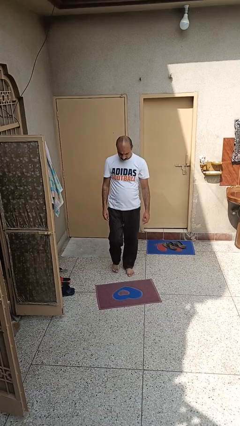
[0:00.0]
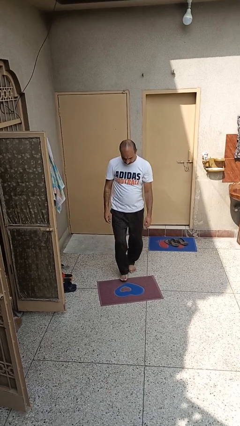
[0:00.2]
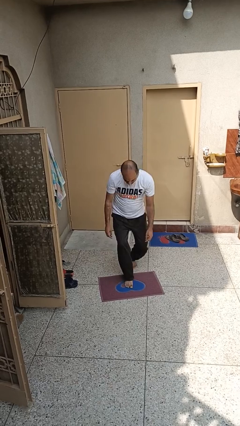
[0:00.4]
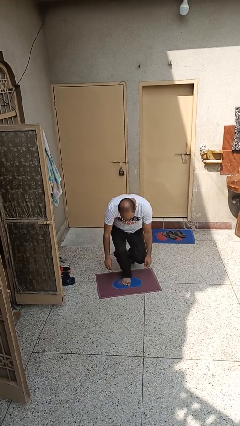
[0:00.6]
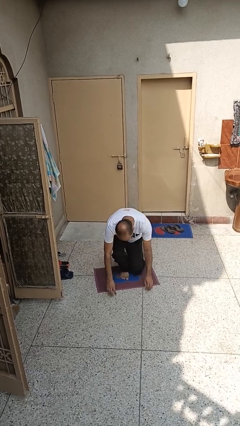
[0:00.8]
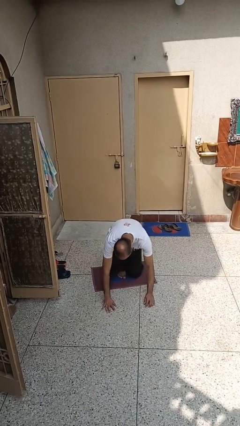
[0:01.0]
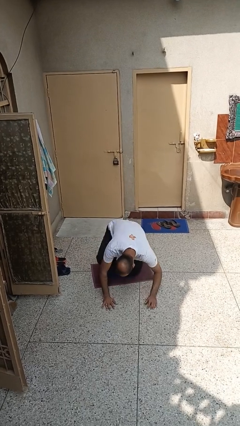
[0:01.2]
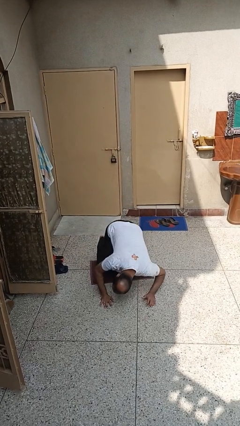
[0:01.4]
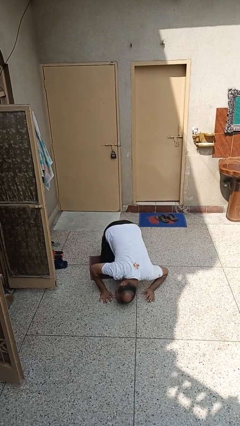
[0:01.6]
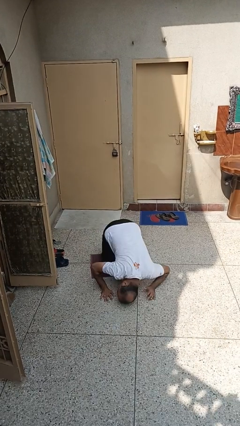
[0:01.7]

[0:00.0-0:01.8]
person trips on object on floor

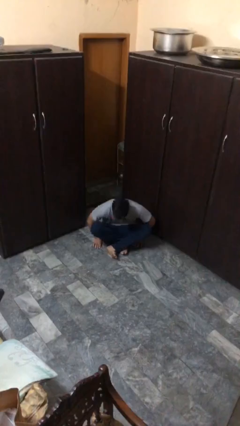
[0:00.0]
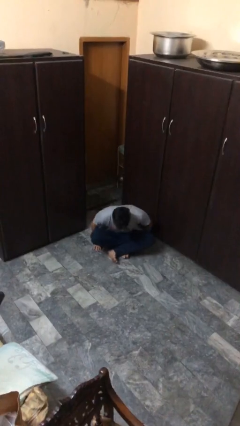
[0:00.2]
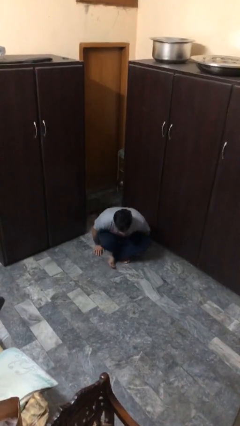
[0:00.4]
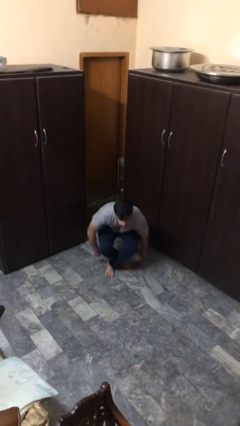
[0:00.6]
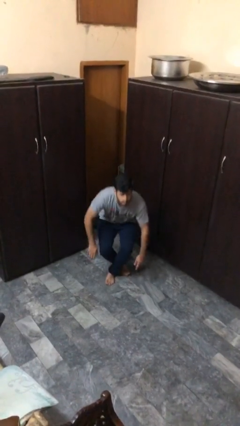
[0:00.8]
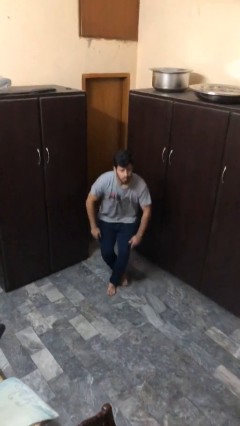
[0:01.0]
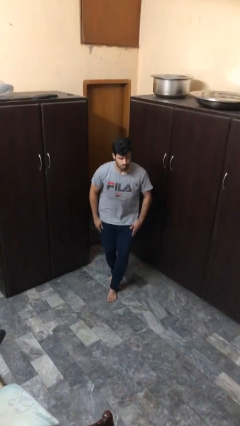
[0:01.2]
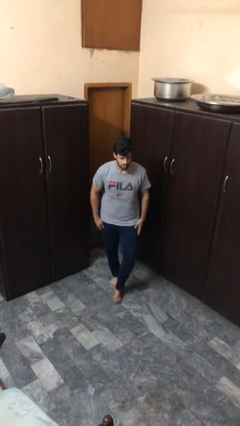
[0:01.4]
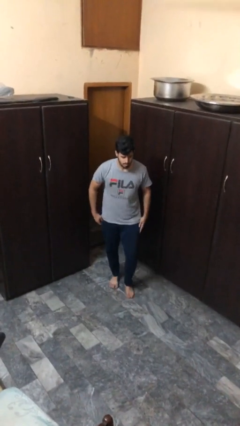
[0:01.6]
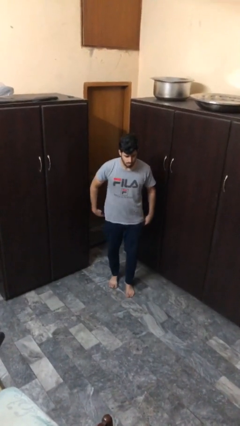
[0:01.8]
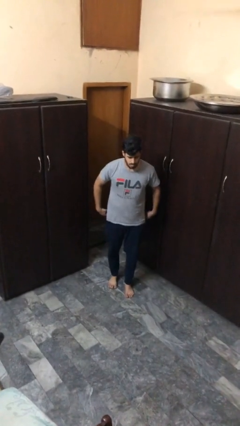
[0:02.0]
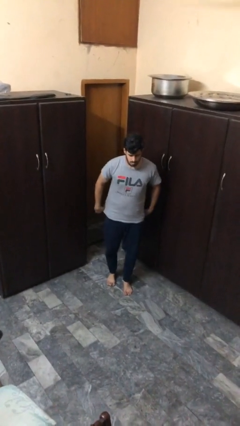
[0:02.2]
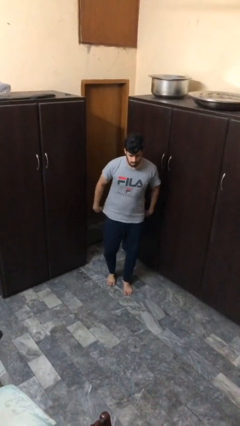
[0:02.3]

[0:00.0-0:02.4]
person stands up from floor

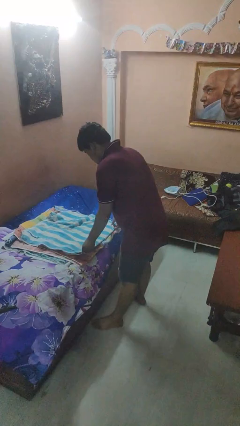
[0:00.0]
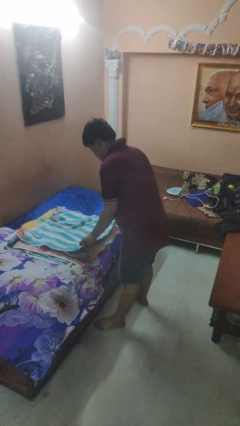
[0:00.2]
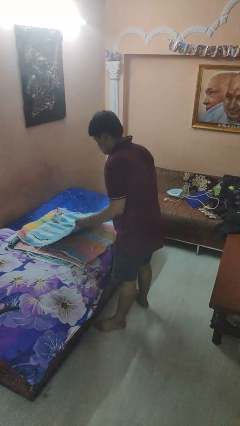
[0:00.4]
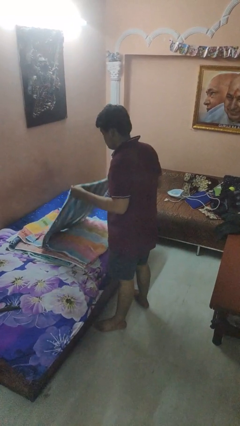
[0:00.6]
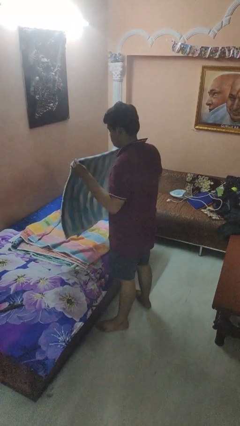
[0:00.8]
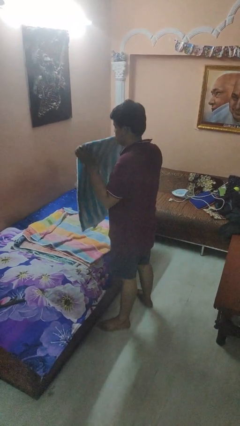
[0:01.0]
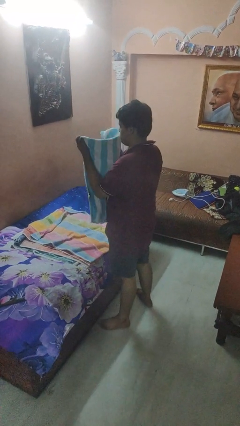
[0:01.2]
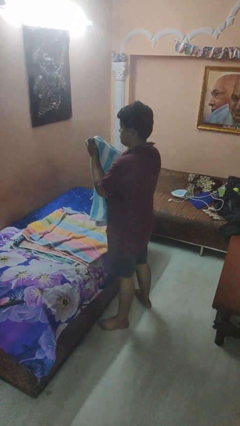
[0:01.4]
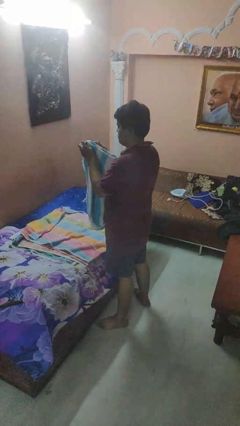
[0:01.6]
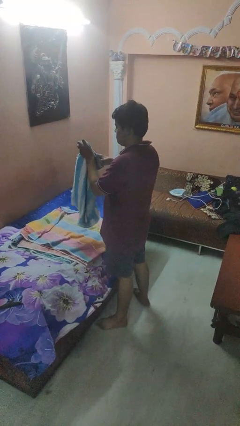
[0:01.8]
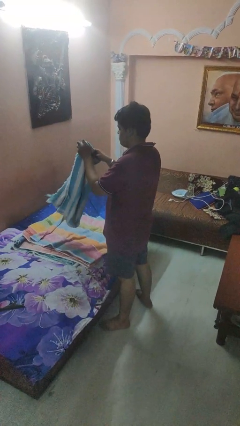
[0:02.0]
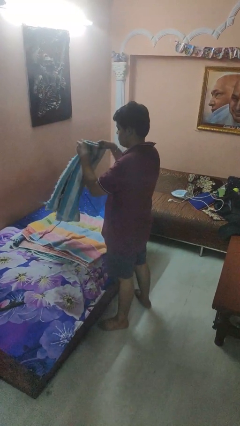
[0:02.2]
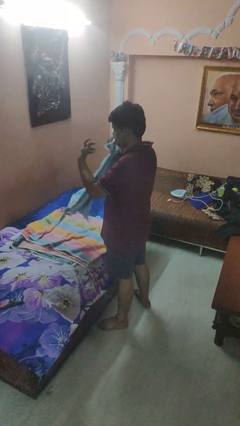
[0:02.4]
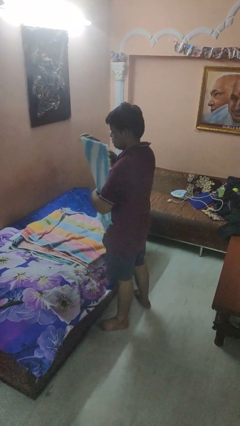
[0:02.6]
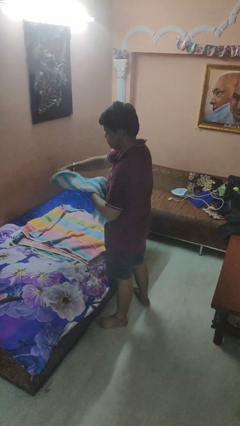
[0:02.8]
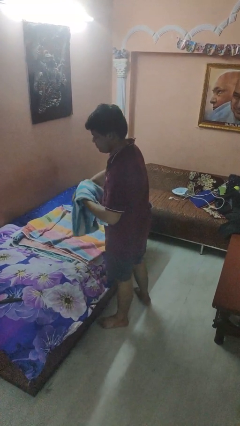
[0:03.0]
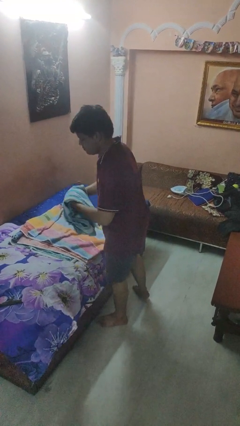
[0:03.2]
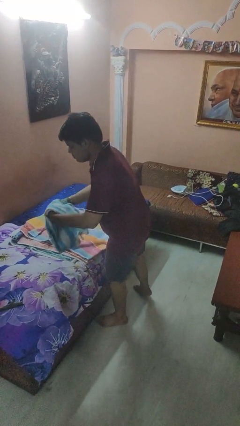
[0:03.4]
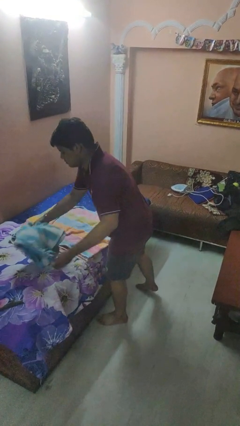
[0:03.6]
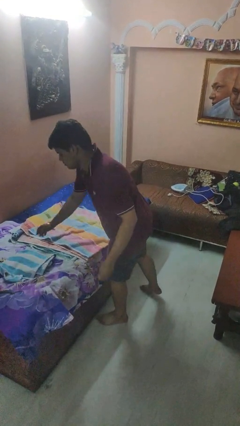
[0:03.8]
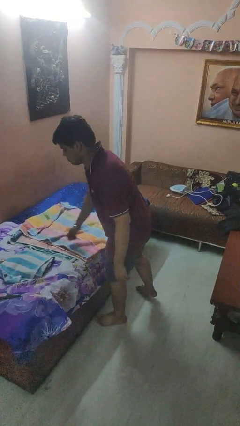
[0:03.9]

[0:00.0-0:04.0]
person folds towel

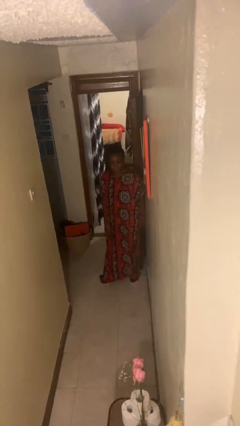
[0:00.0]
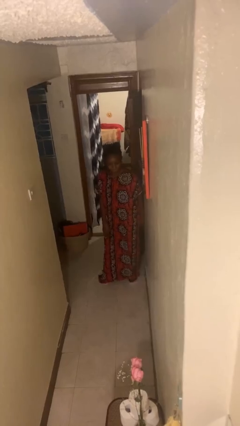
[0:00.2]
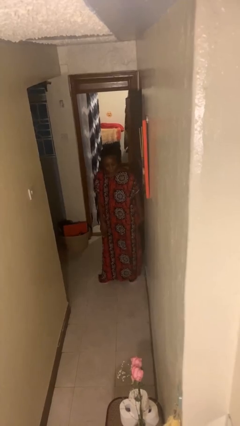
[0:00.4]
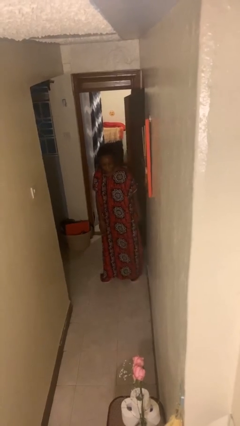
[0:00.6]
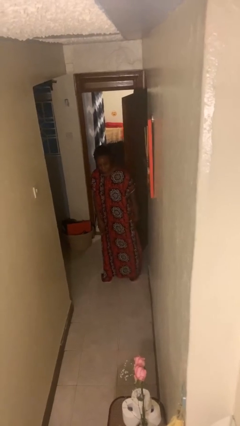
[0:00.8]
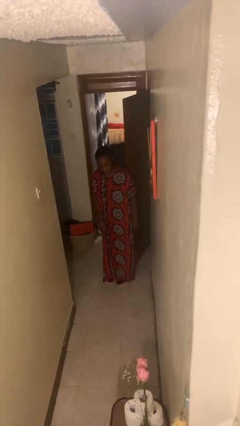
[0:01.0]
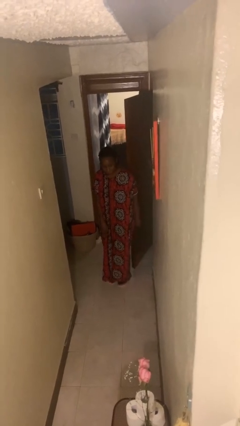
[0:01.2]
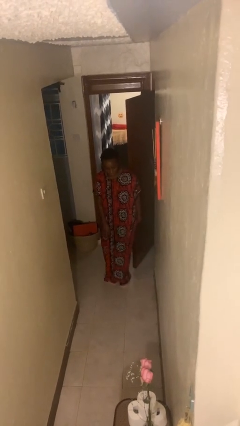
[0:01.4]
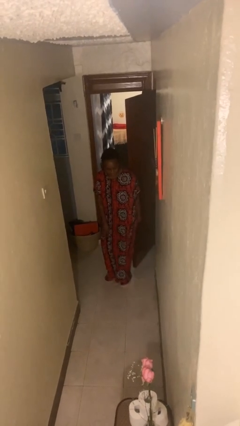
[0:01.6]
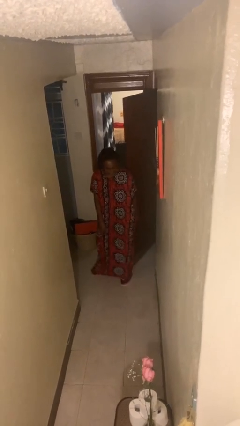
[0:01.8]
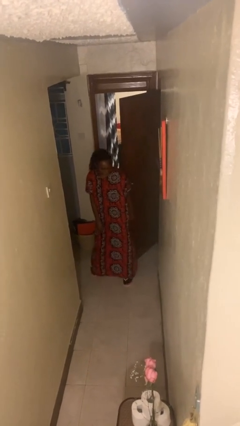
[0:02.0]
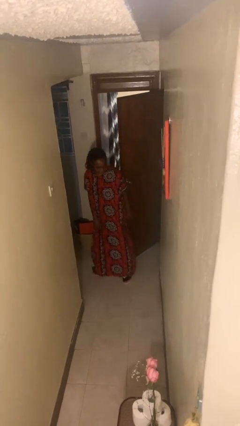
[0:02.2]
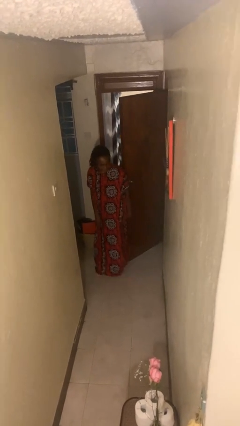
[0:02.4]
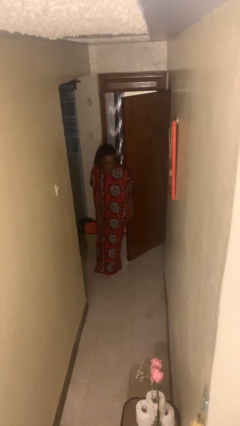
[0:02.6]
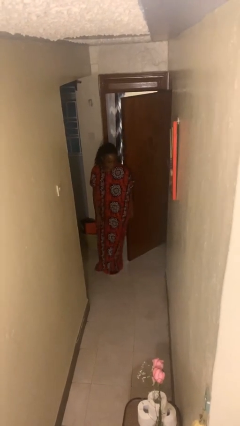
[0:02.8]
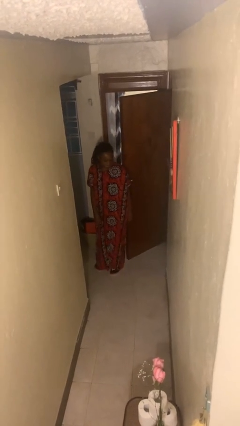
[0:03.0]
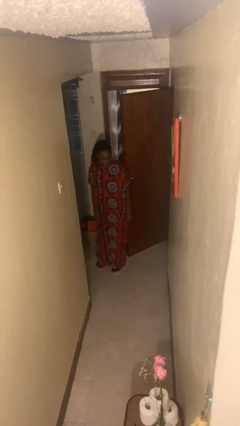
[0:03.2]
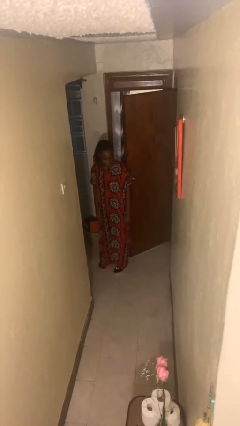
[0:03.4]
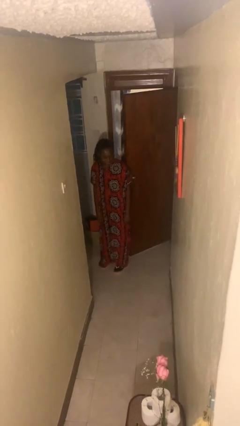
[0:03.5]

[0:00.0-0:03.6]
person opens facility door

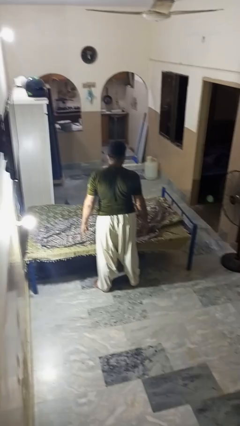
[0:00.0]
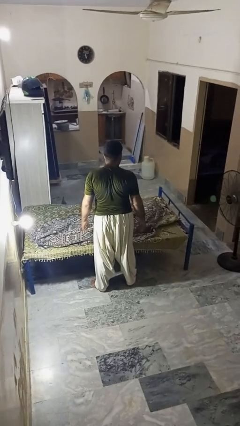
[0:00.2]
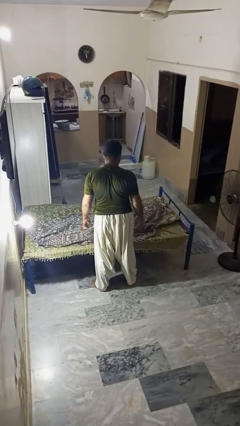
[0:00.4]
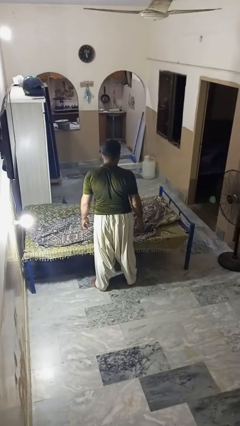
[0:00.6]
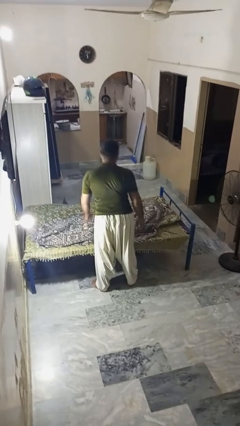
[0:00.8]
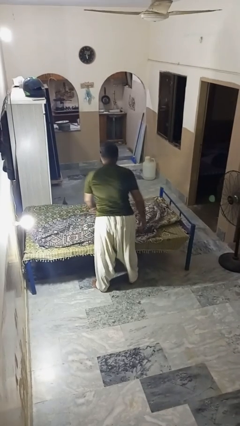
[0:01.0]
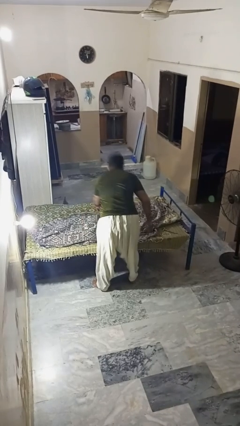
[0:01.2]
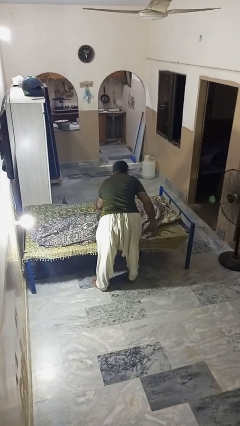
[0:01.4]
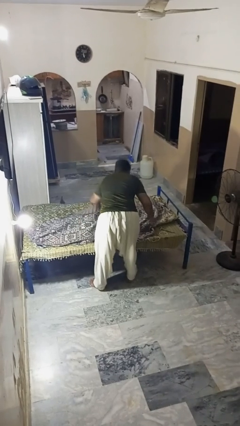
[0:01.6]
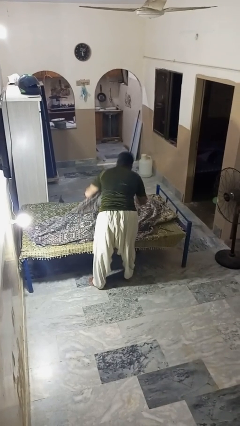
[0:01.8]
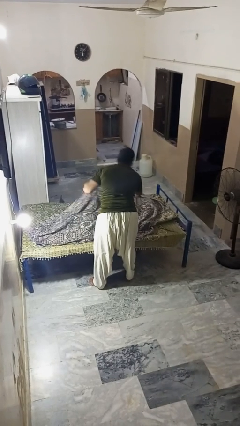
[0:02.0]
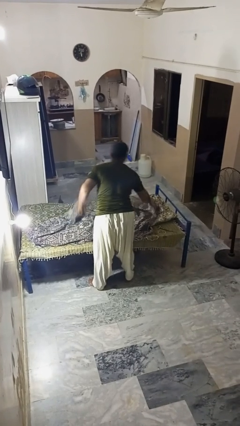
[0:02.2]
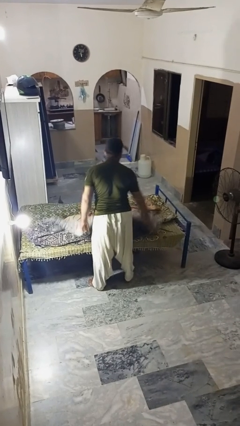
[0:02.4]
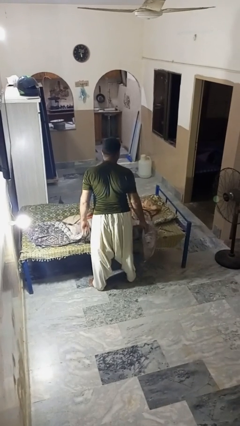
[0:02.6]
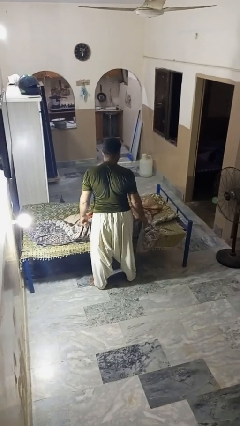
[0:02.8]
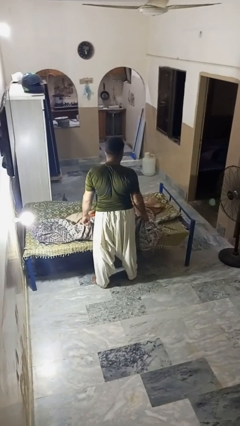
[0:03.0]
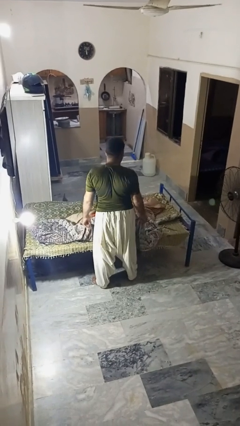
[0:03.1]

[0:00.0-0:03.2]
person uncovers friend with blanket

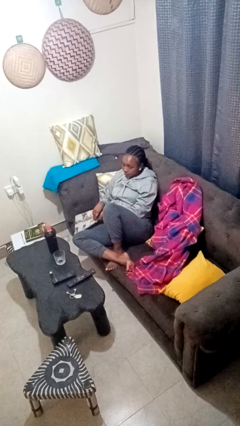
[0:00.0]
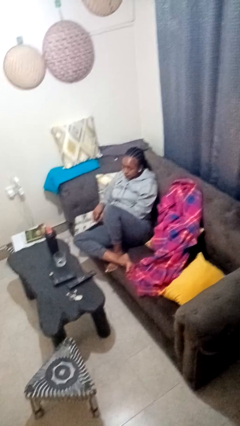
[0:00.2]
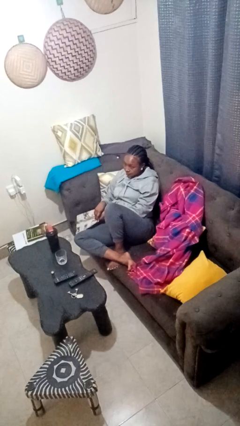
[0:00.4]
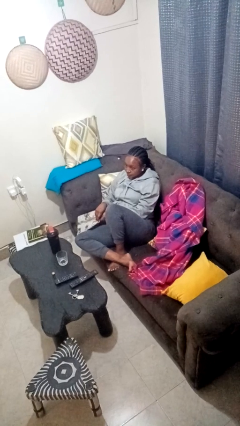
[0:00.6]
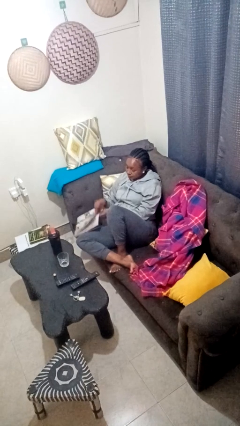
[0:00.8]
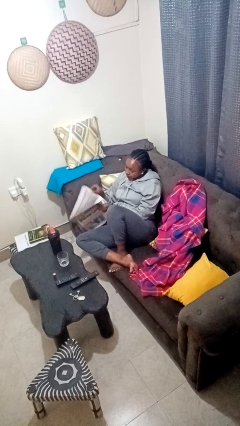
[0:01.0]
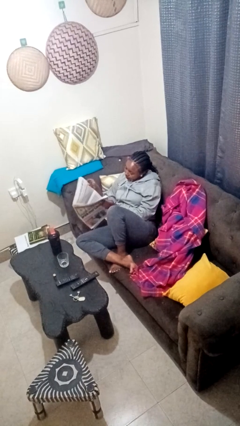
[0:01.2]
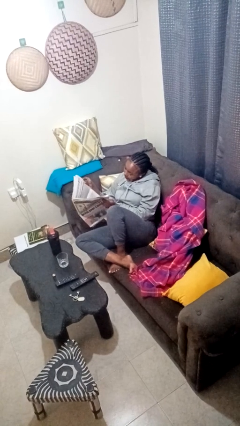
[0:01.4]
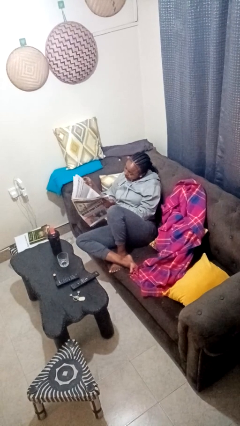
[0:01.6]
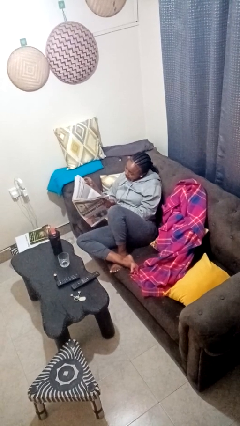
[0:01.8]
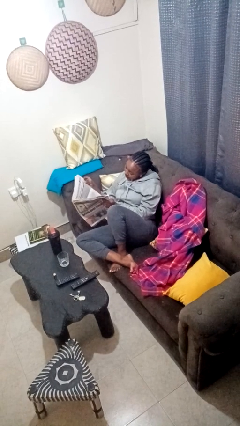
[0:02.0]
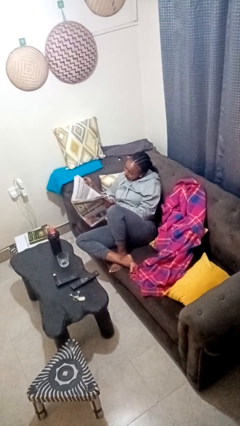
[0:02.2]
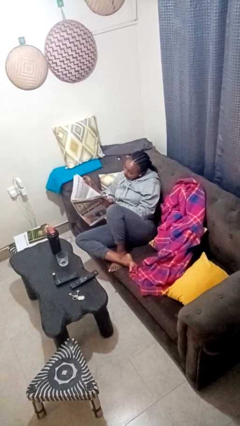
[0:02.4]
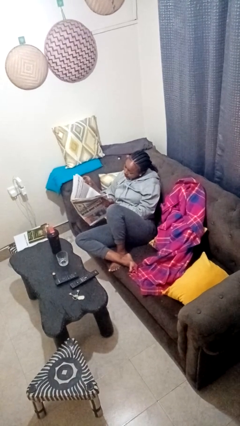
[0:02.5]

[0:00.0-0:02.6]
person reads newspaper
